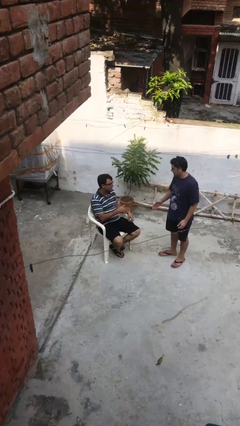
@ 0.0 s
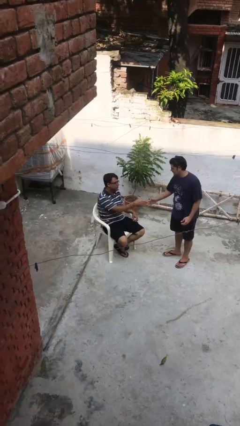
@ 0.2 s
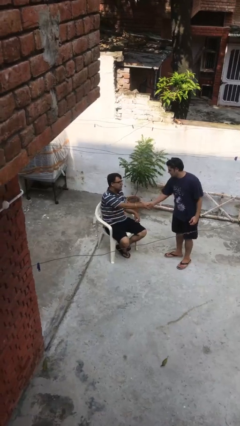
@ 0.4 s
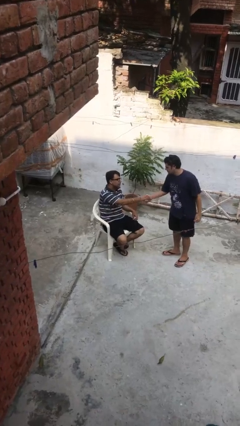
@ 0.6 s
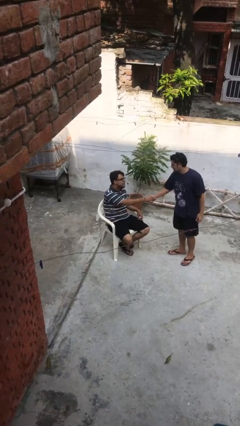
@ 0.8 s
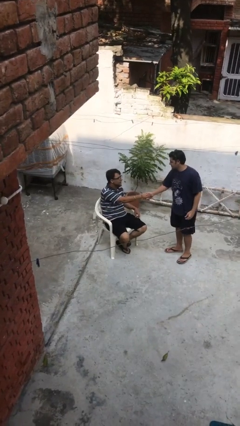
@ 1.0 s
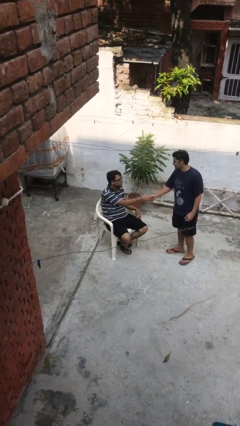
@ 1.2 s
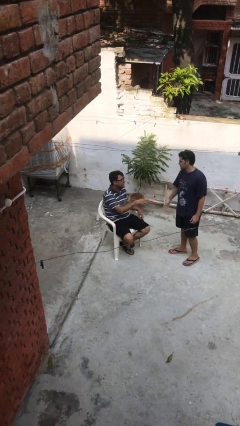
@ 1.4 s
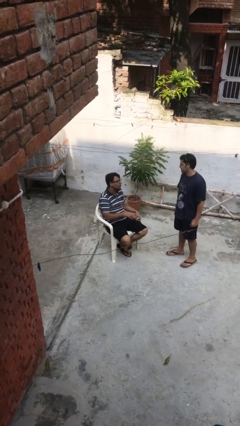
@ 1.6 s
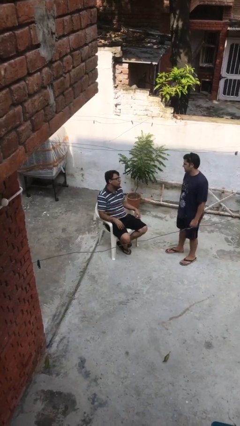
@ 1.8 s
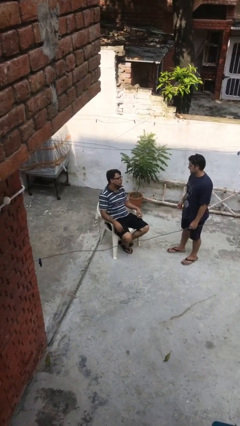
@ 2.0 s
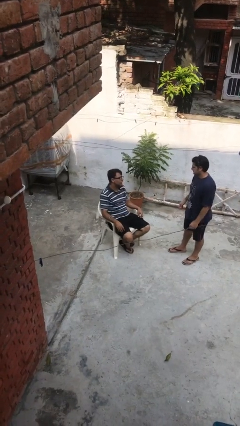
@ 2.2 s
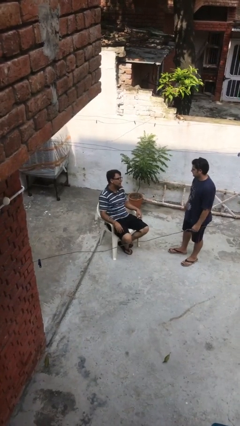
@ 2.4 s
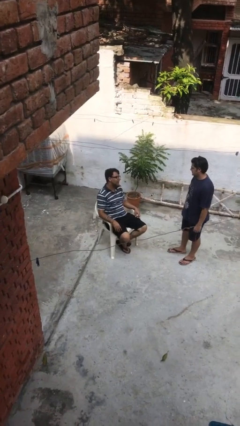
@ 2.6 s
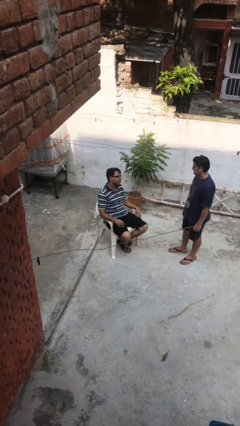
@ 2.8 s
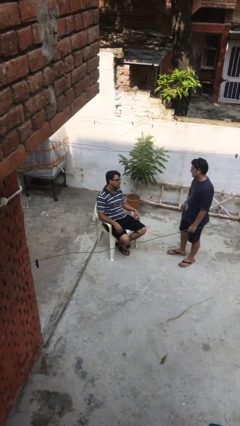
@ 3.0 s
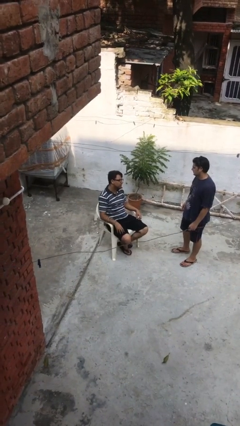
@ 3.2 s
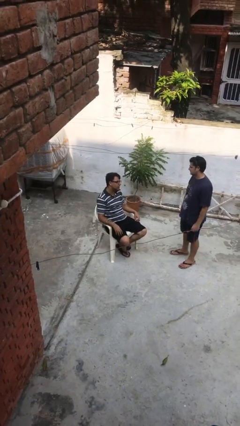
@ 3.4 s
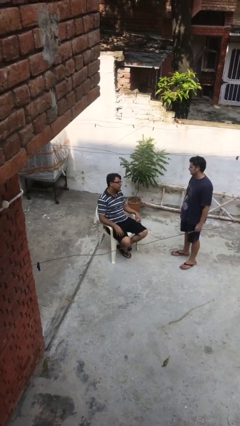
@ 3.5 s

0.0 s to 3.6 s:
person shakes hand

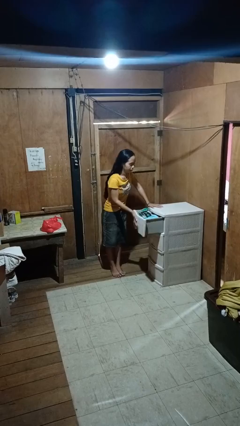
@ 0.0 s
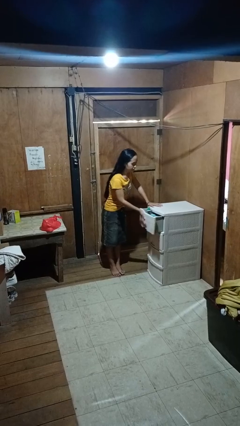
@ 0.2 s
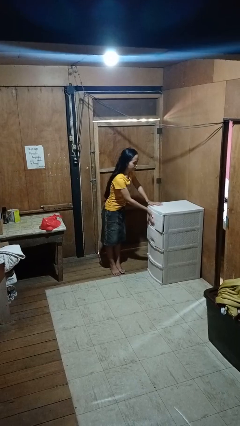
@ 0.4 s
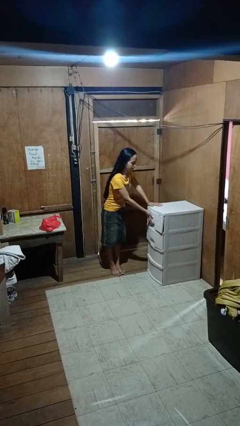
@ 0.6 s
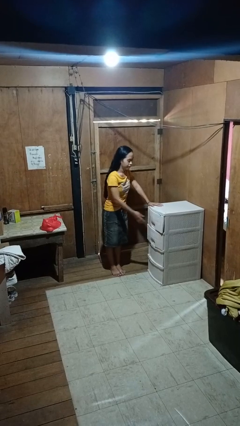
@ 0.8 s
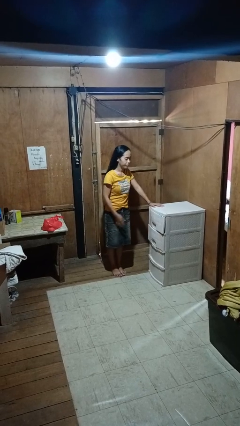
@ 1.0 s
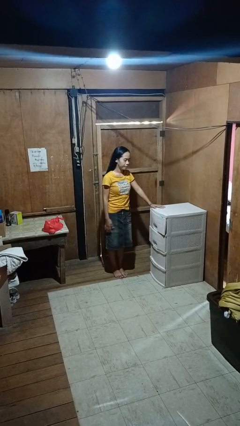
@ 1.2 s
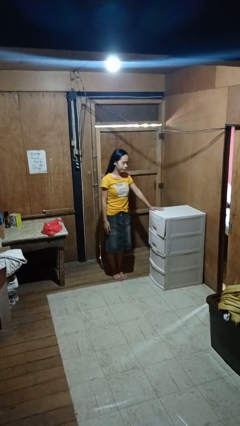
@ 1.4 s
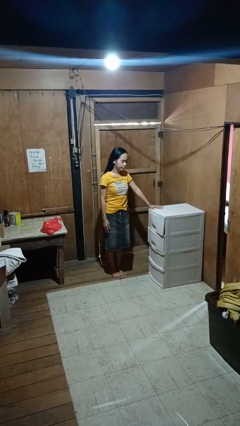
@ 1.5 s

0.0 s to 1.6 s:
person closes dresser drawer

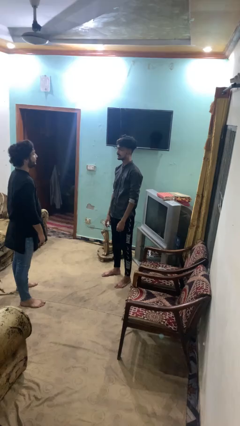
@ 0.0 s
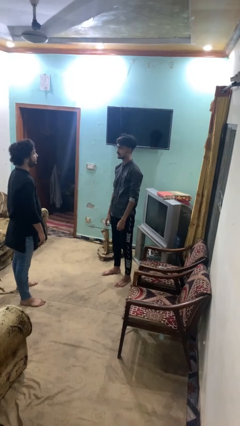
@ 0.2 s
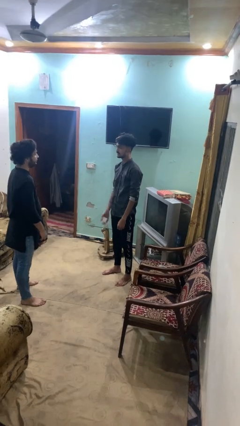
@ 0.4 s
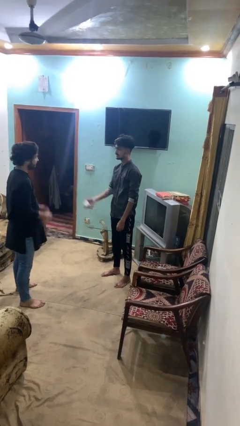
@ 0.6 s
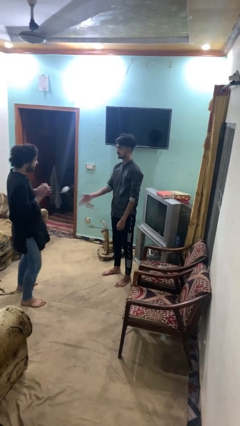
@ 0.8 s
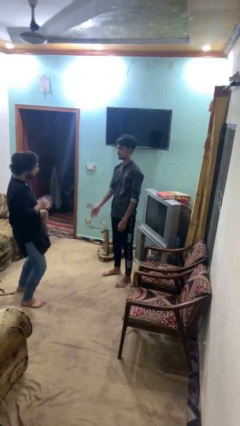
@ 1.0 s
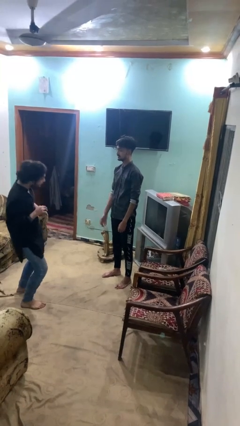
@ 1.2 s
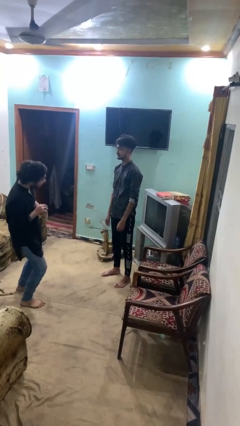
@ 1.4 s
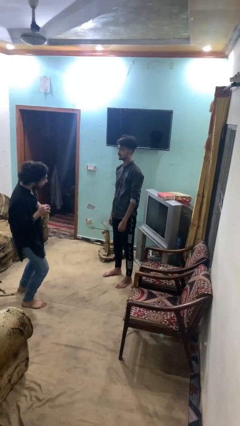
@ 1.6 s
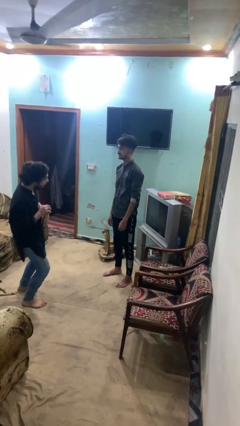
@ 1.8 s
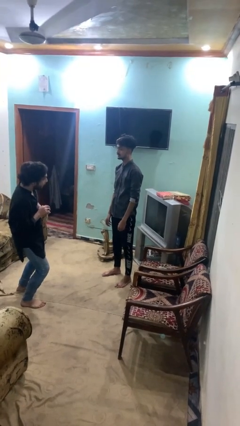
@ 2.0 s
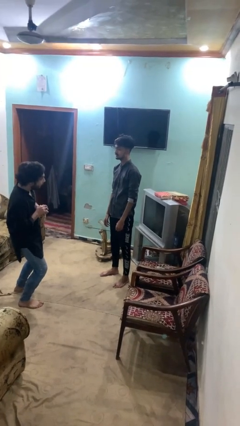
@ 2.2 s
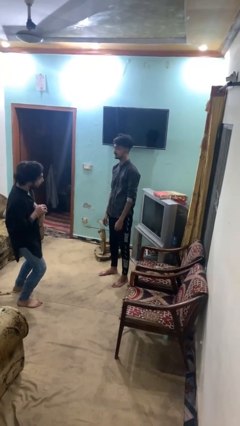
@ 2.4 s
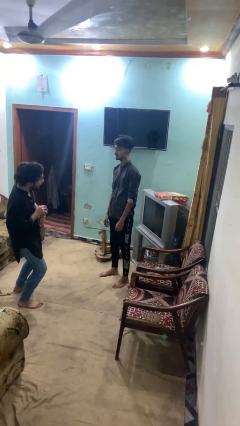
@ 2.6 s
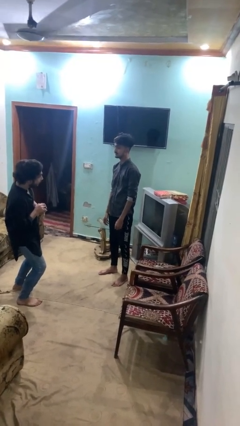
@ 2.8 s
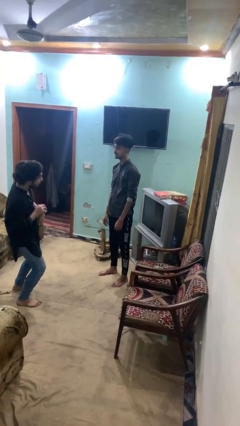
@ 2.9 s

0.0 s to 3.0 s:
person throws object to person

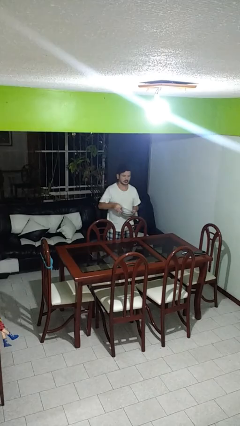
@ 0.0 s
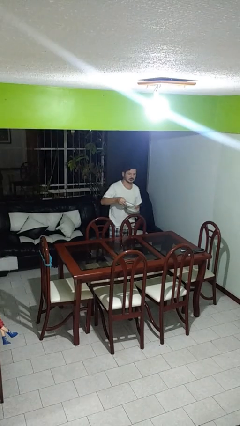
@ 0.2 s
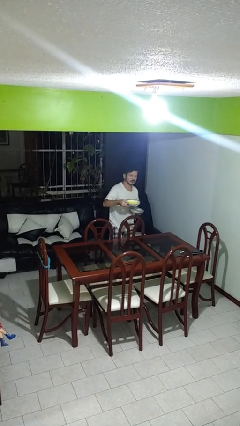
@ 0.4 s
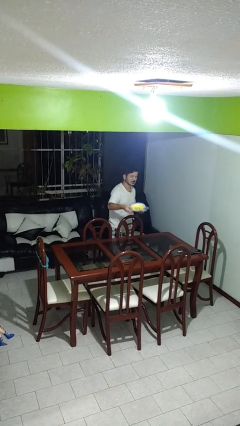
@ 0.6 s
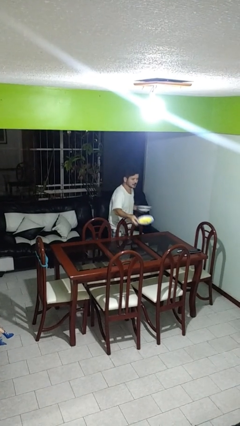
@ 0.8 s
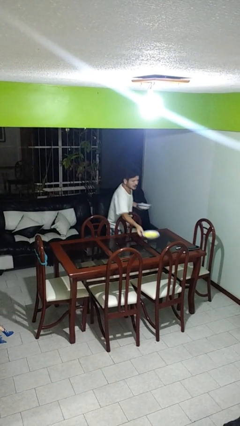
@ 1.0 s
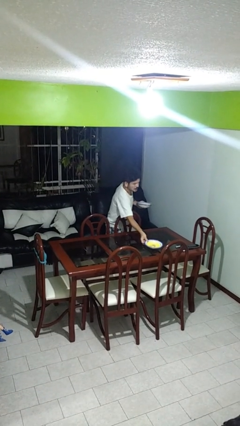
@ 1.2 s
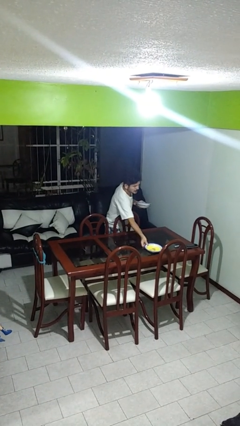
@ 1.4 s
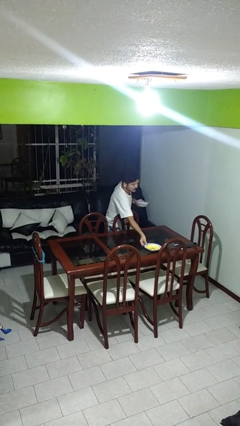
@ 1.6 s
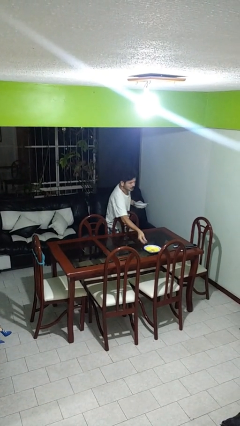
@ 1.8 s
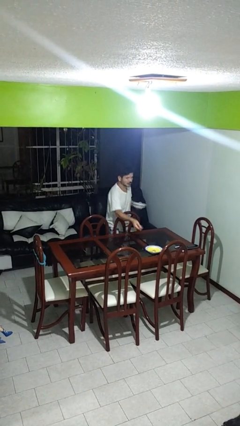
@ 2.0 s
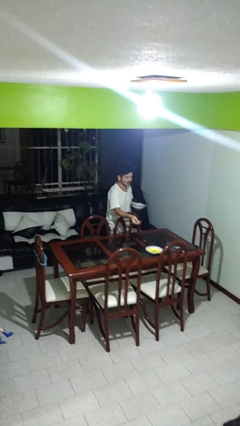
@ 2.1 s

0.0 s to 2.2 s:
person sets table

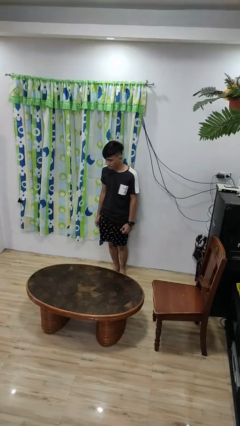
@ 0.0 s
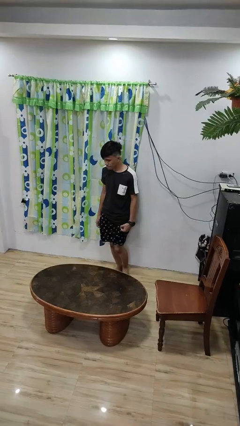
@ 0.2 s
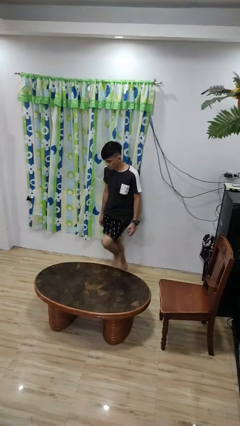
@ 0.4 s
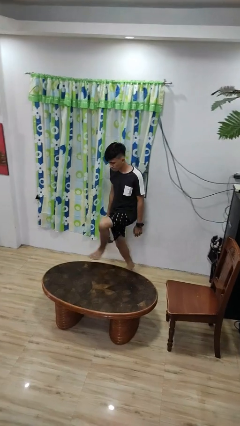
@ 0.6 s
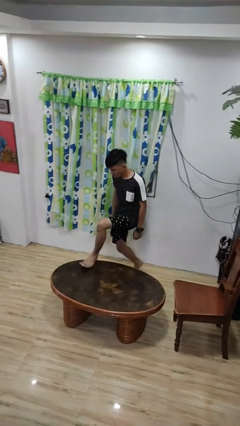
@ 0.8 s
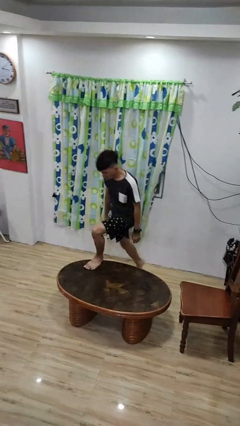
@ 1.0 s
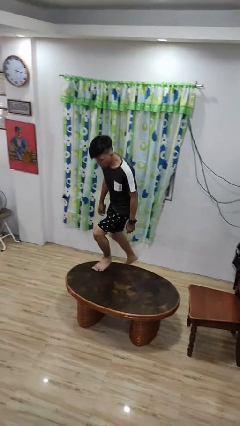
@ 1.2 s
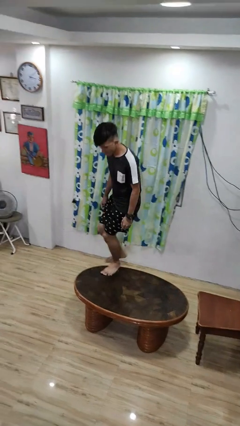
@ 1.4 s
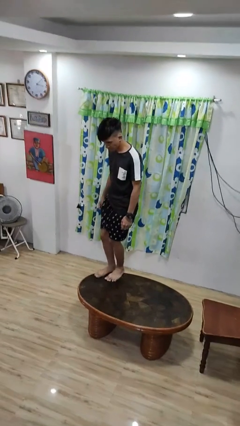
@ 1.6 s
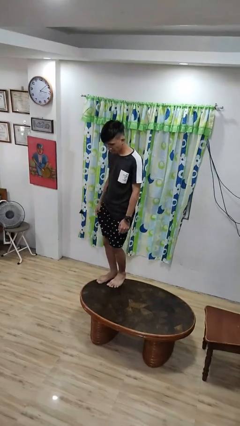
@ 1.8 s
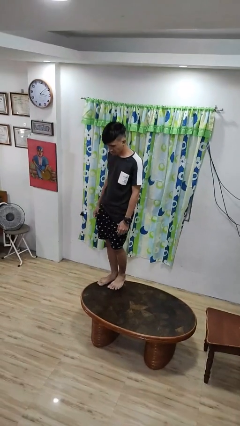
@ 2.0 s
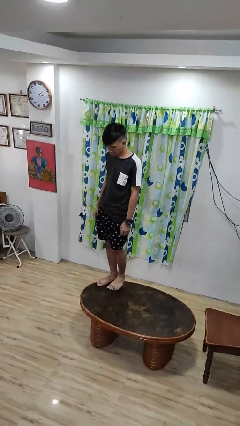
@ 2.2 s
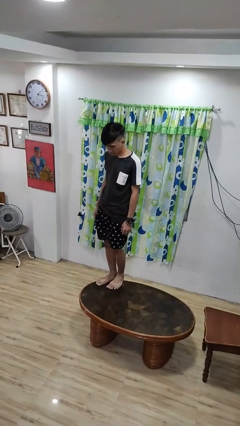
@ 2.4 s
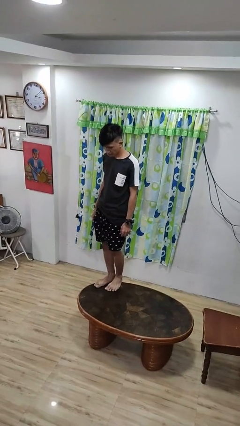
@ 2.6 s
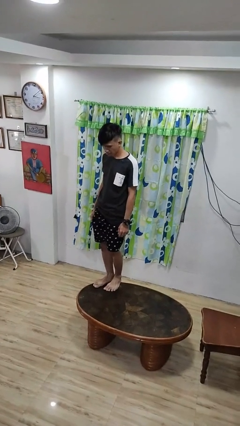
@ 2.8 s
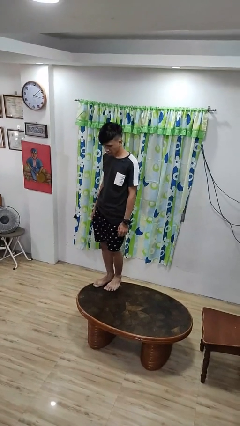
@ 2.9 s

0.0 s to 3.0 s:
person climbs on table

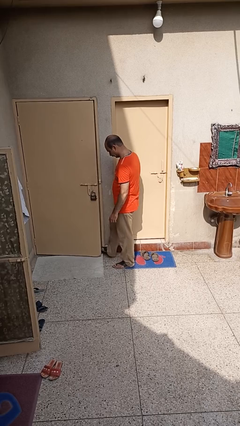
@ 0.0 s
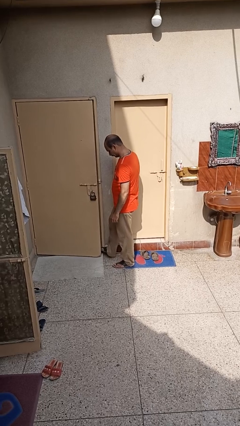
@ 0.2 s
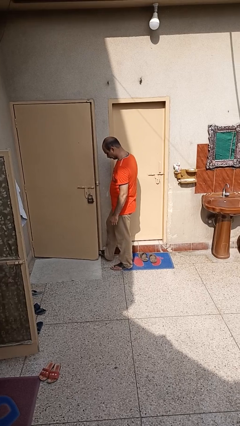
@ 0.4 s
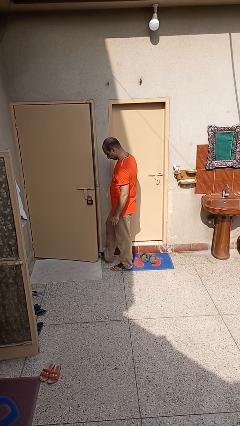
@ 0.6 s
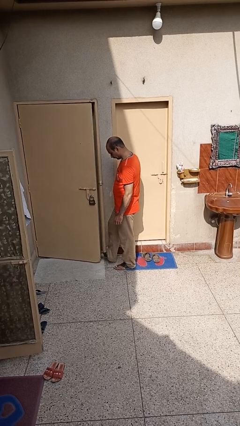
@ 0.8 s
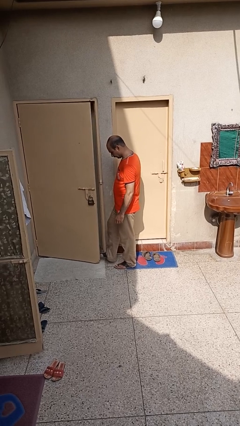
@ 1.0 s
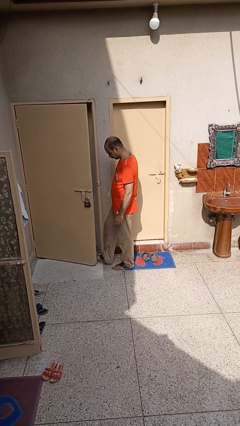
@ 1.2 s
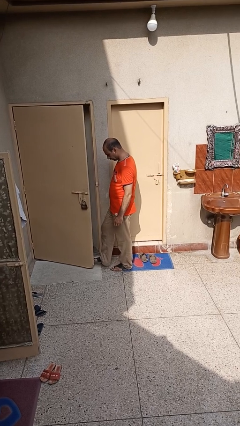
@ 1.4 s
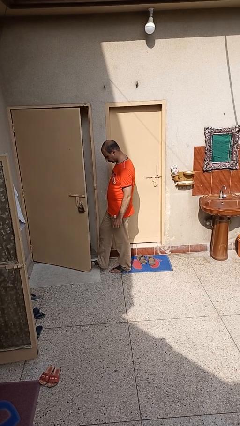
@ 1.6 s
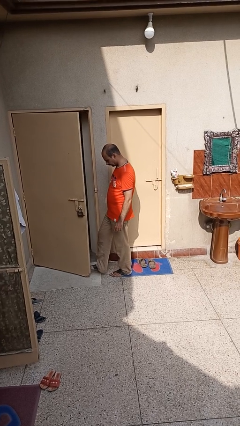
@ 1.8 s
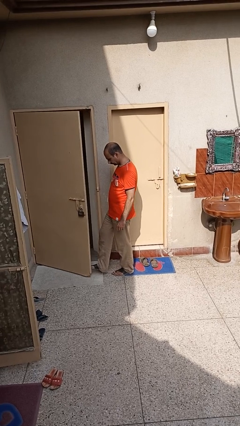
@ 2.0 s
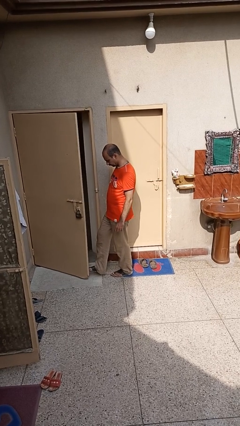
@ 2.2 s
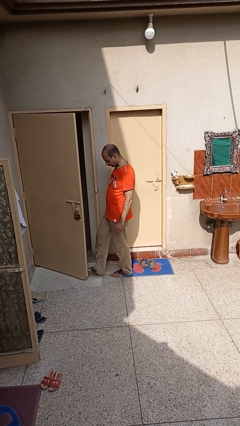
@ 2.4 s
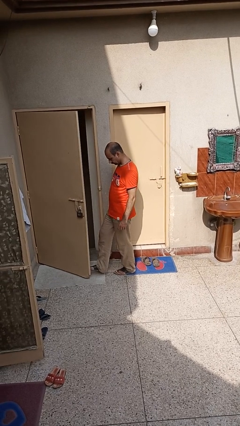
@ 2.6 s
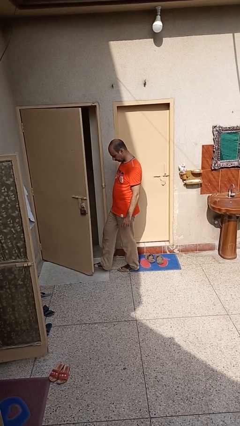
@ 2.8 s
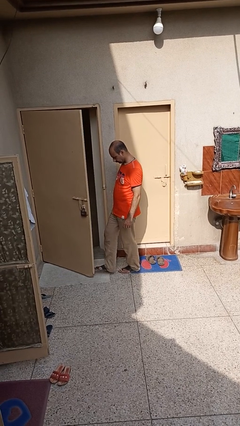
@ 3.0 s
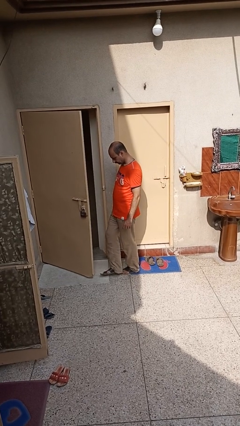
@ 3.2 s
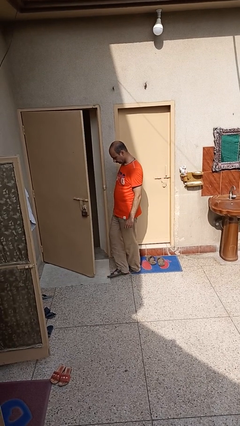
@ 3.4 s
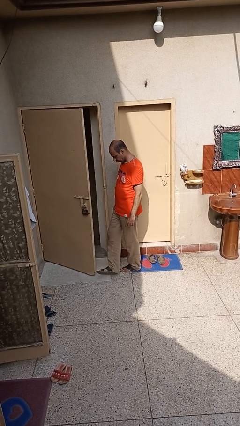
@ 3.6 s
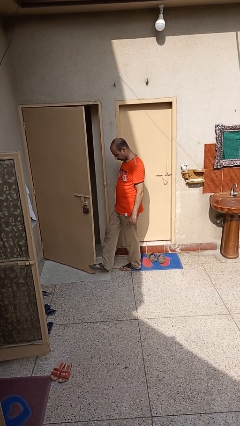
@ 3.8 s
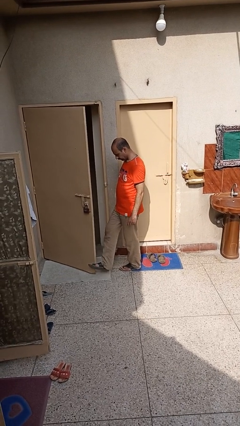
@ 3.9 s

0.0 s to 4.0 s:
person opens facility door
